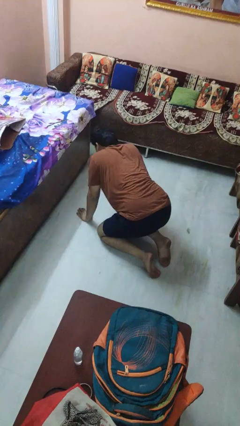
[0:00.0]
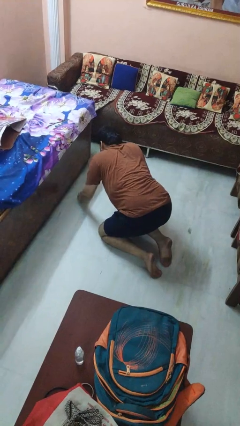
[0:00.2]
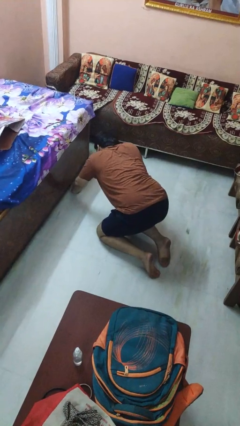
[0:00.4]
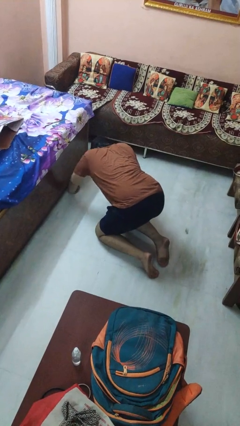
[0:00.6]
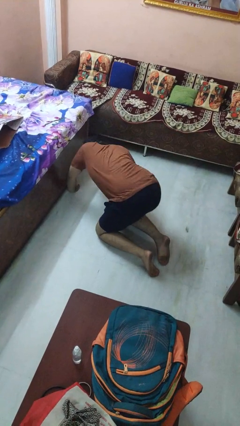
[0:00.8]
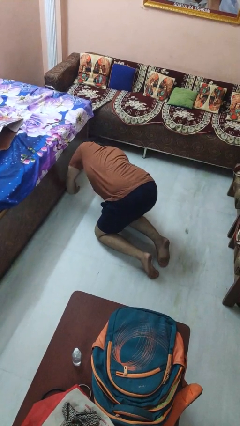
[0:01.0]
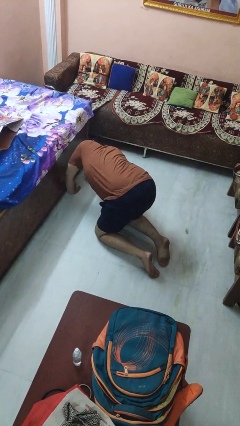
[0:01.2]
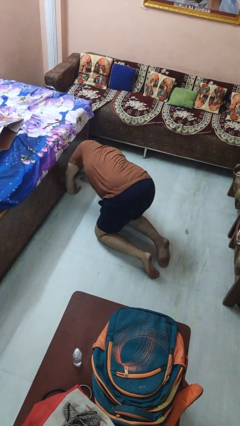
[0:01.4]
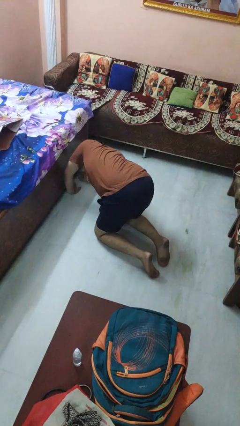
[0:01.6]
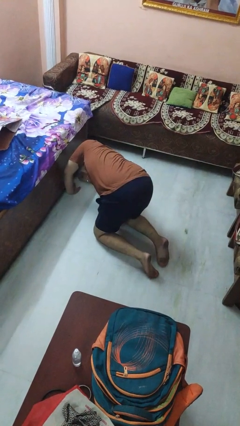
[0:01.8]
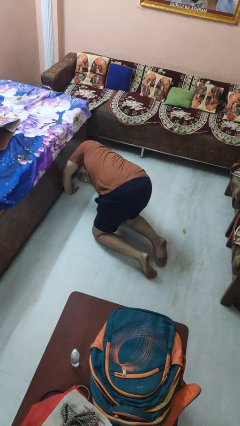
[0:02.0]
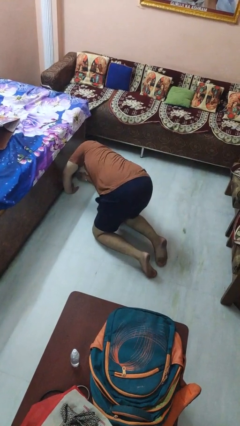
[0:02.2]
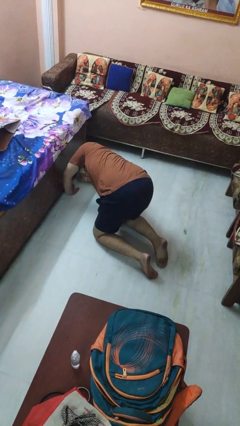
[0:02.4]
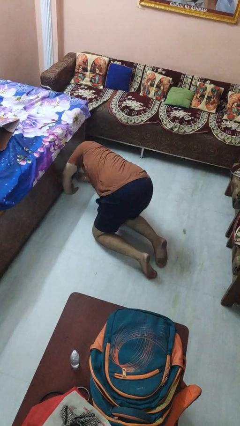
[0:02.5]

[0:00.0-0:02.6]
person searches under bed

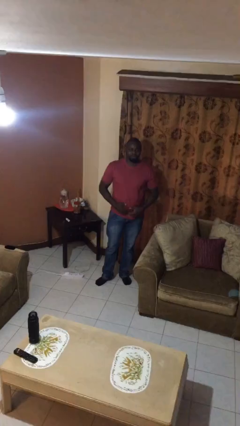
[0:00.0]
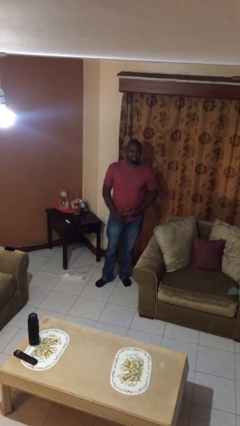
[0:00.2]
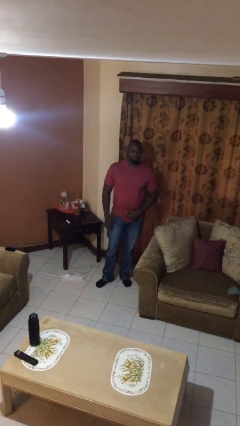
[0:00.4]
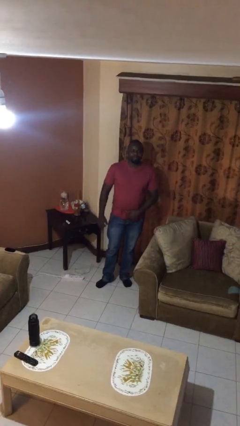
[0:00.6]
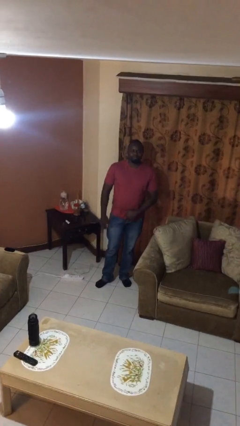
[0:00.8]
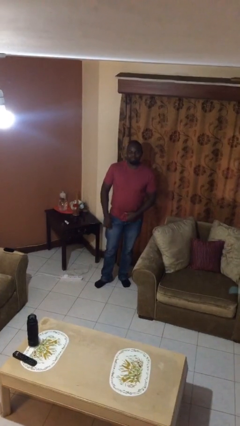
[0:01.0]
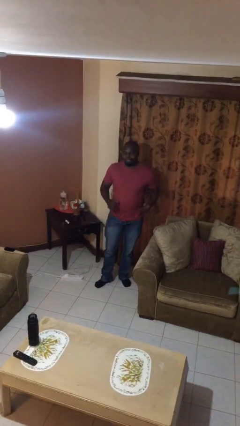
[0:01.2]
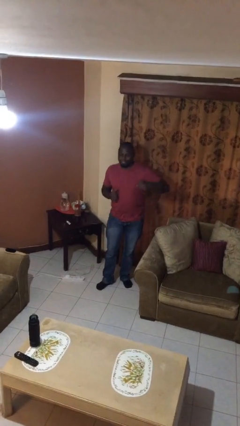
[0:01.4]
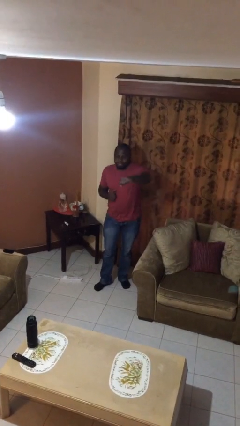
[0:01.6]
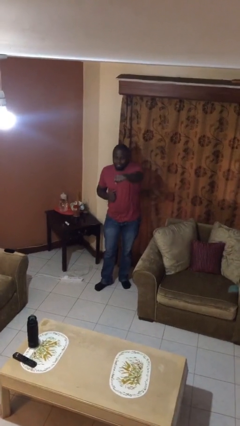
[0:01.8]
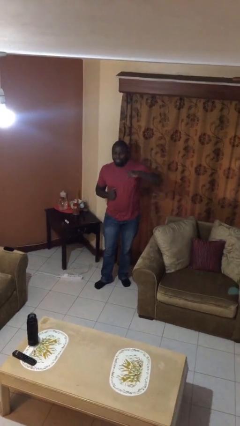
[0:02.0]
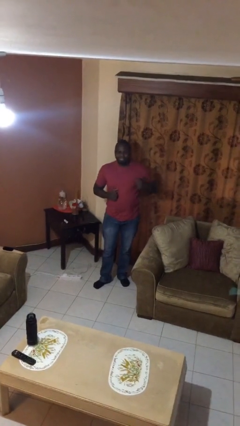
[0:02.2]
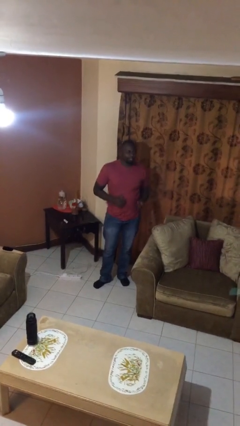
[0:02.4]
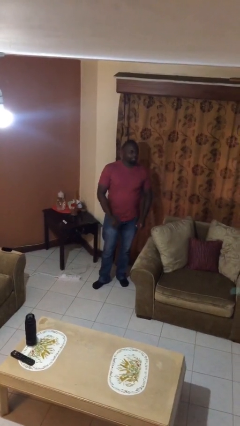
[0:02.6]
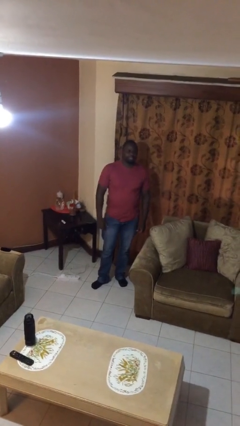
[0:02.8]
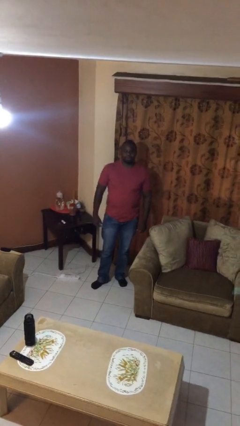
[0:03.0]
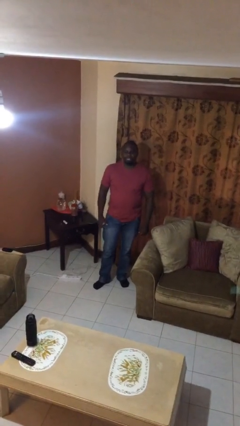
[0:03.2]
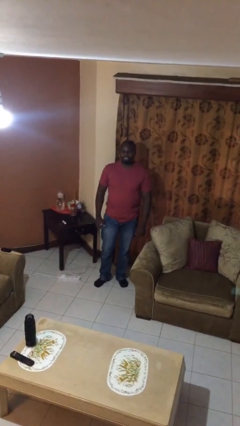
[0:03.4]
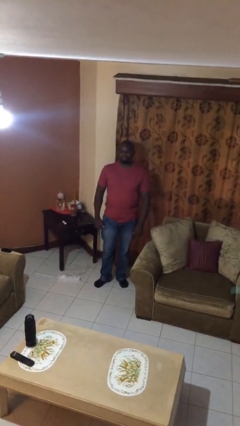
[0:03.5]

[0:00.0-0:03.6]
person punches

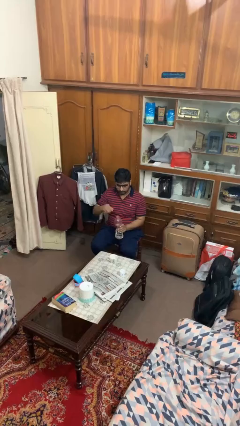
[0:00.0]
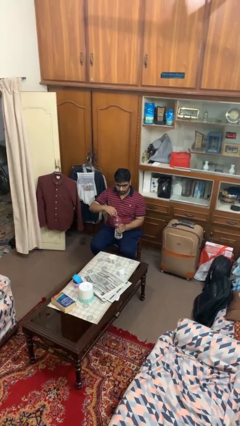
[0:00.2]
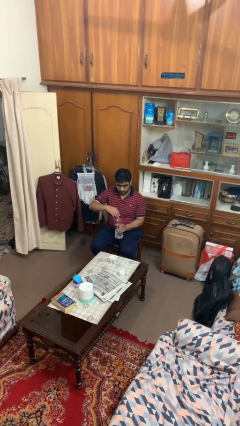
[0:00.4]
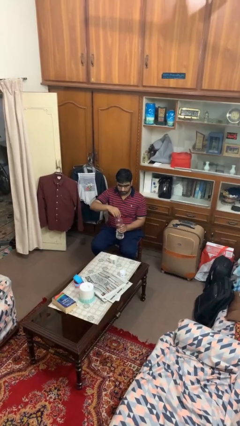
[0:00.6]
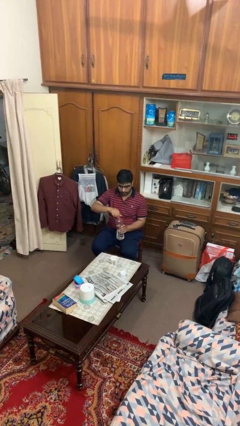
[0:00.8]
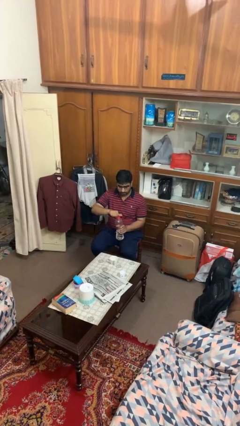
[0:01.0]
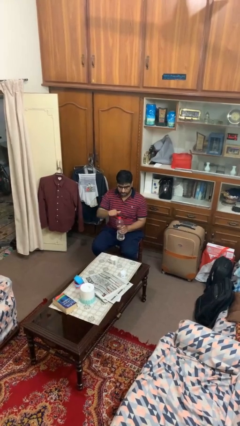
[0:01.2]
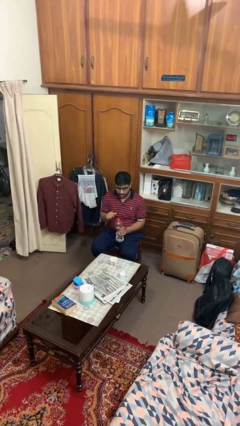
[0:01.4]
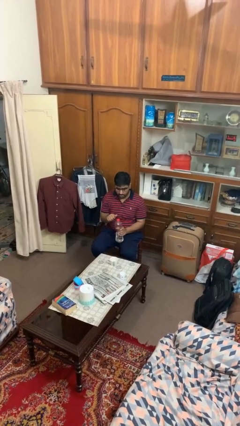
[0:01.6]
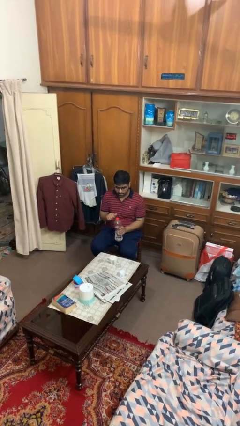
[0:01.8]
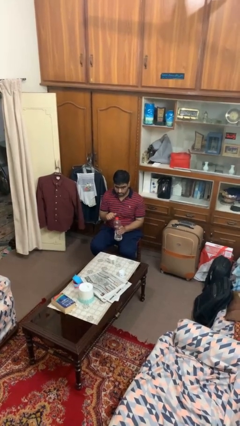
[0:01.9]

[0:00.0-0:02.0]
person screws lid to bottle

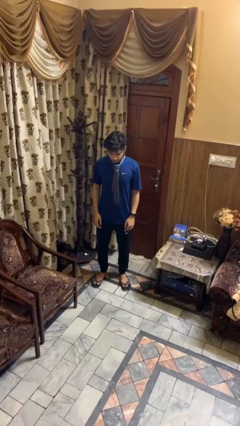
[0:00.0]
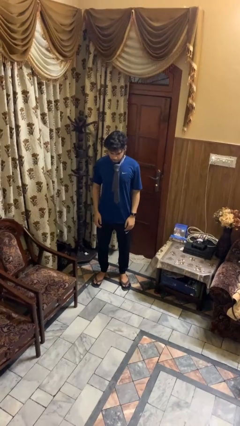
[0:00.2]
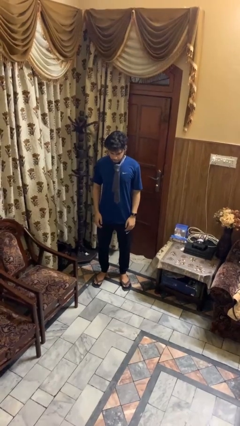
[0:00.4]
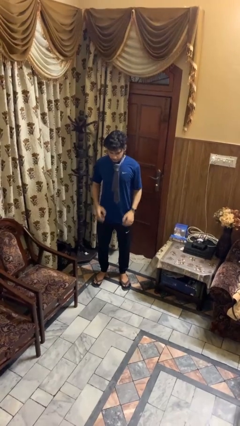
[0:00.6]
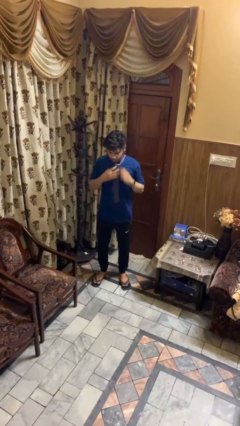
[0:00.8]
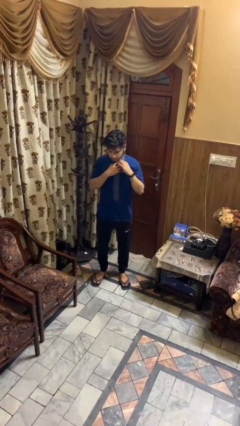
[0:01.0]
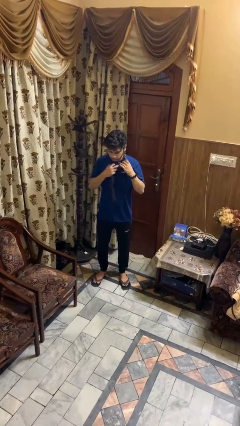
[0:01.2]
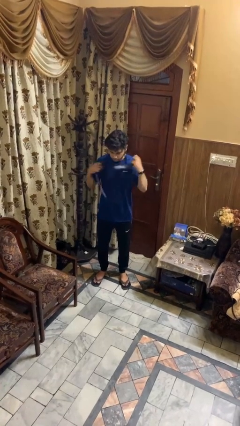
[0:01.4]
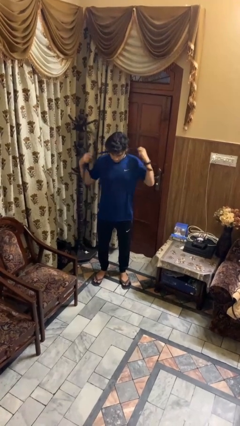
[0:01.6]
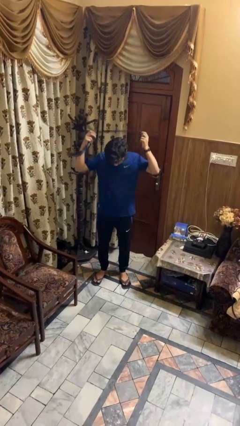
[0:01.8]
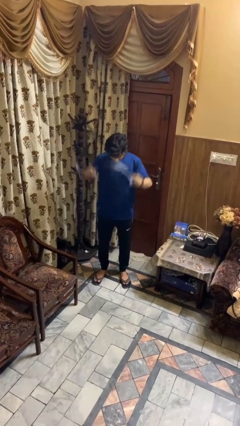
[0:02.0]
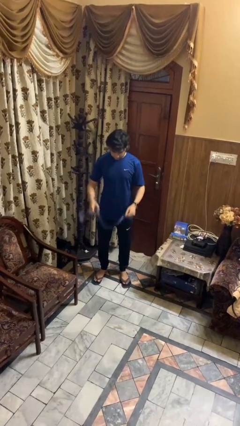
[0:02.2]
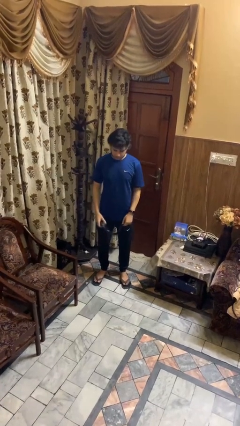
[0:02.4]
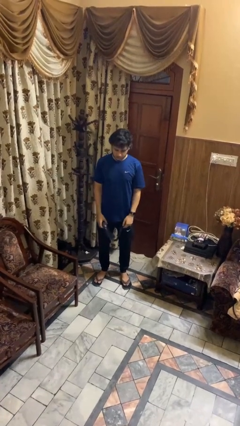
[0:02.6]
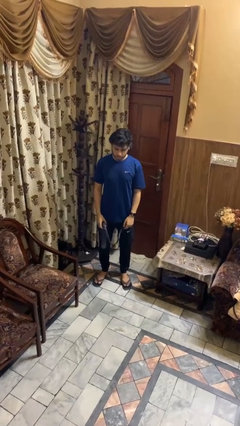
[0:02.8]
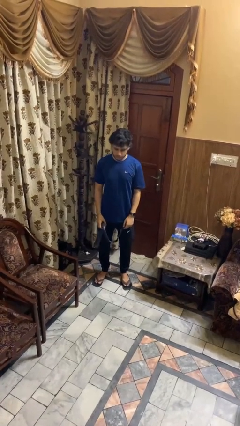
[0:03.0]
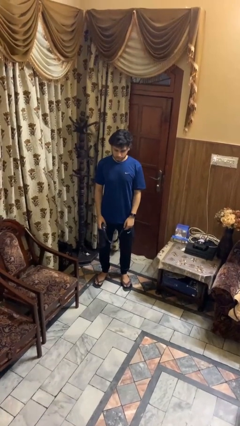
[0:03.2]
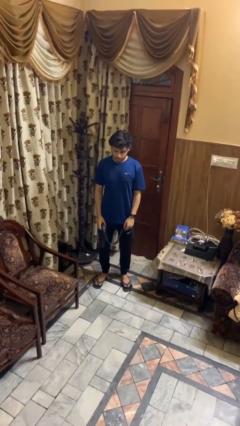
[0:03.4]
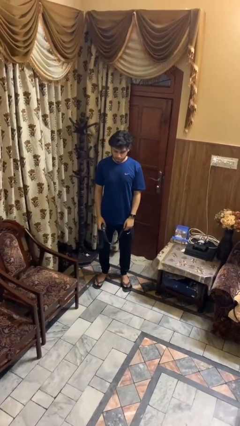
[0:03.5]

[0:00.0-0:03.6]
person takes off necktie

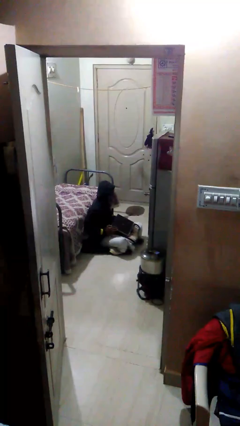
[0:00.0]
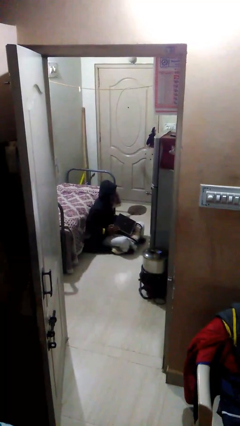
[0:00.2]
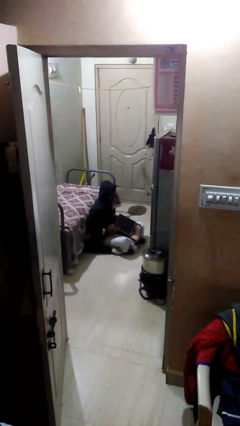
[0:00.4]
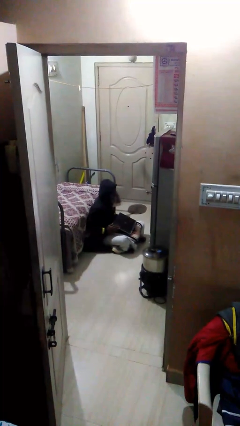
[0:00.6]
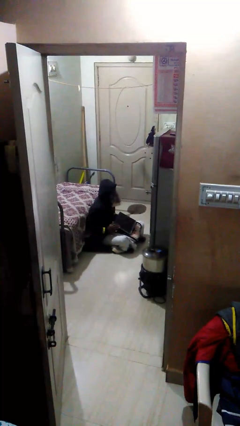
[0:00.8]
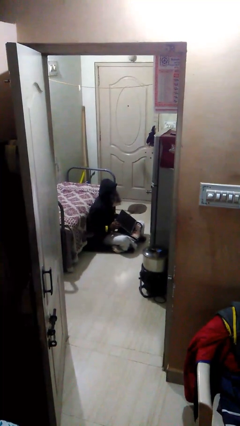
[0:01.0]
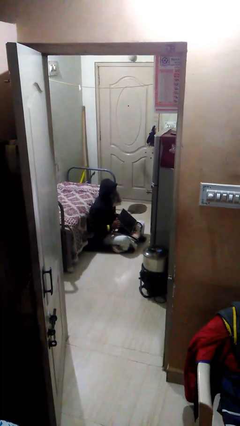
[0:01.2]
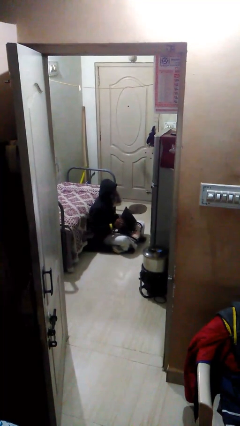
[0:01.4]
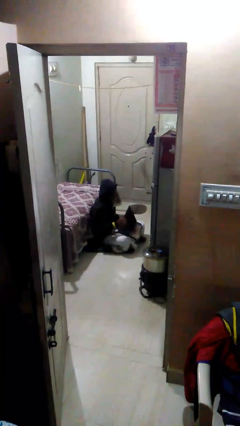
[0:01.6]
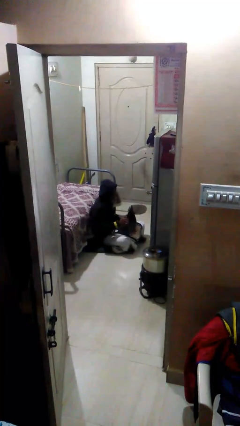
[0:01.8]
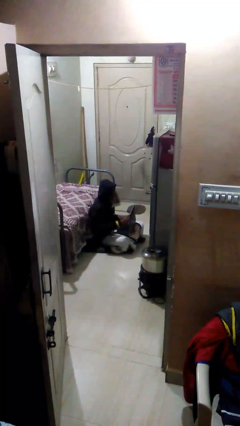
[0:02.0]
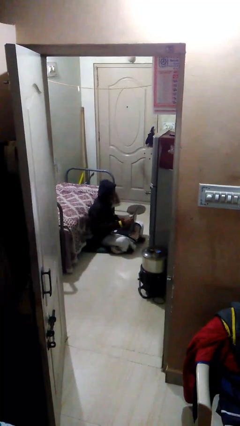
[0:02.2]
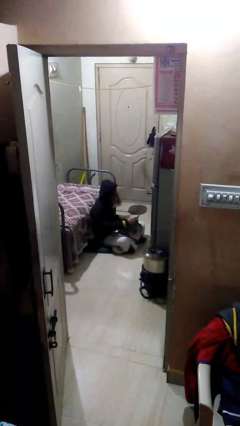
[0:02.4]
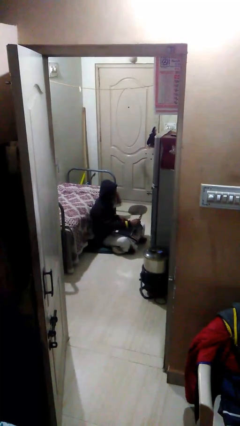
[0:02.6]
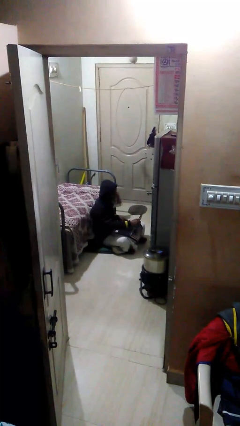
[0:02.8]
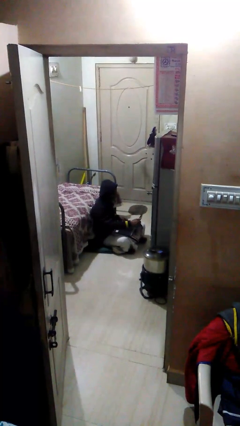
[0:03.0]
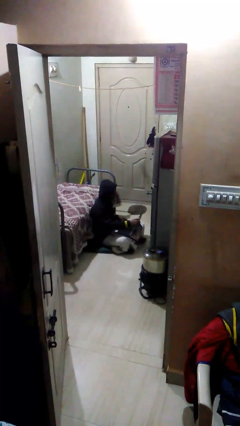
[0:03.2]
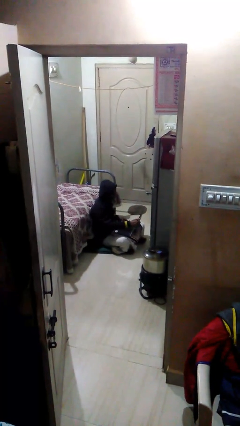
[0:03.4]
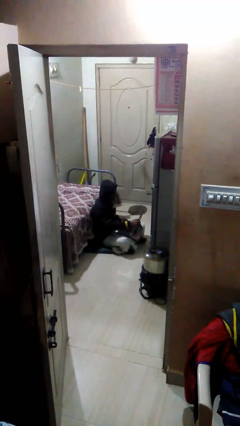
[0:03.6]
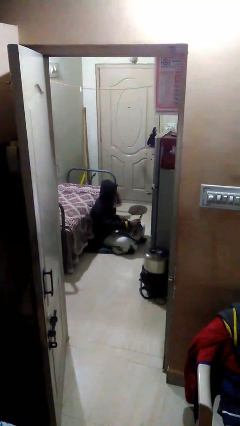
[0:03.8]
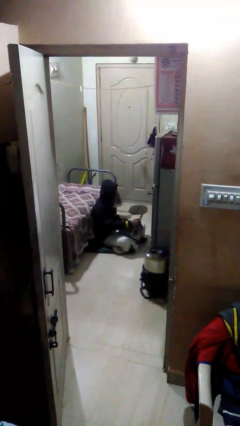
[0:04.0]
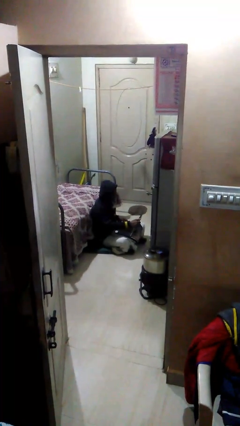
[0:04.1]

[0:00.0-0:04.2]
person interacts with laptop

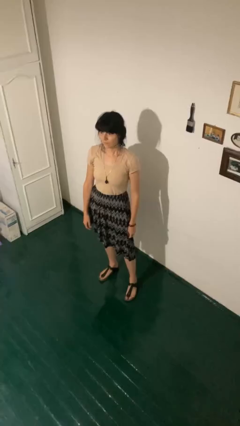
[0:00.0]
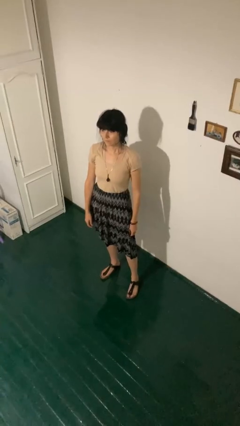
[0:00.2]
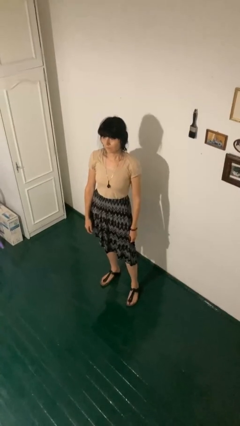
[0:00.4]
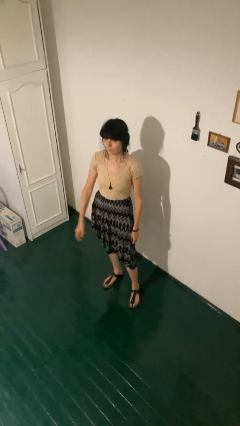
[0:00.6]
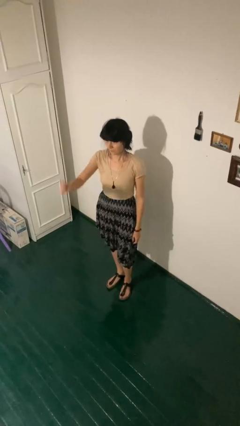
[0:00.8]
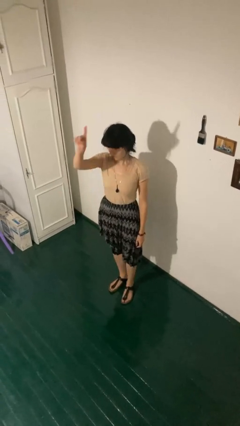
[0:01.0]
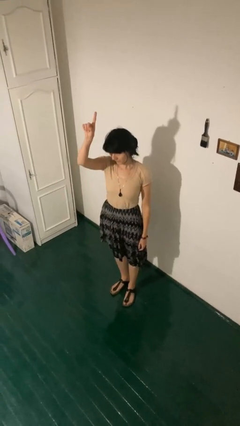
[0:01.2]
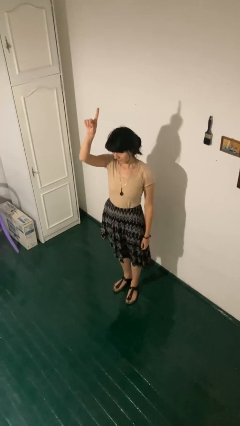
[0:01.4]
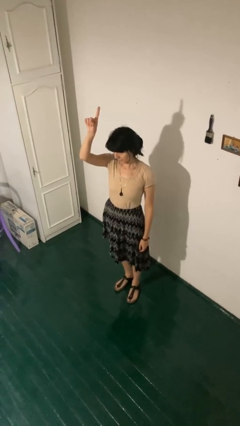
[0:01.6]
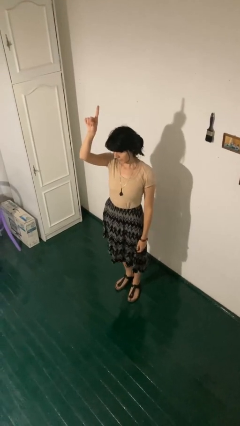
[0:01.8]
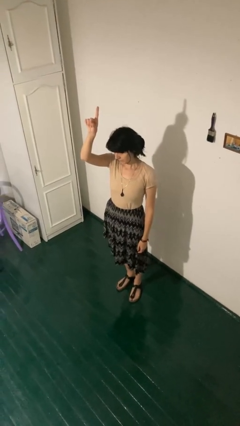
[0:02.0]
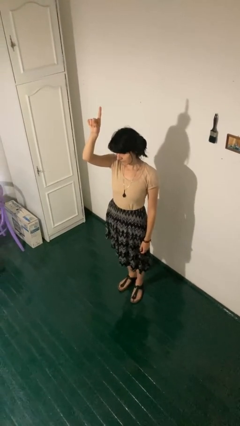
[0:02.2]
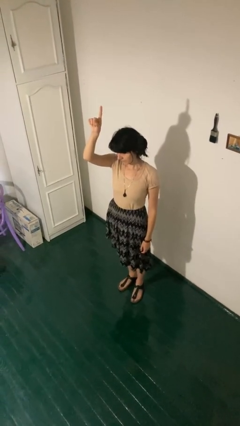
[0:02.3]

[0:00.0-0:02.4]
person gestures raise hand
